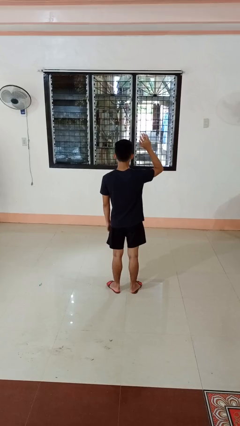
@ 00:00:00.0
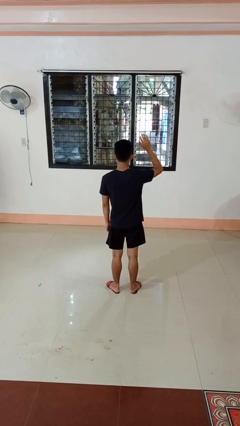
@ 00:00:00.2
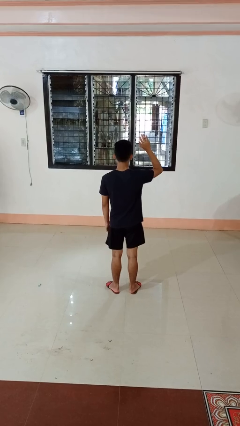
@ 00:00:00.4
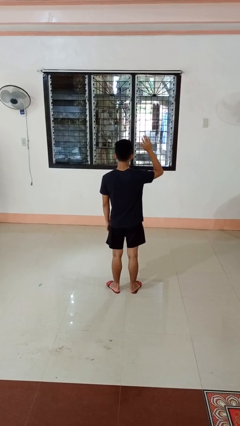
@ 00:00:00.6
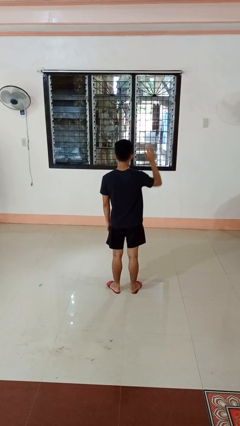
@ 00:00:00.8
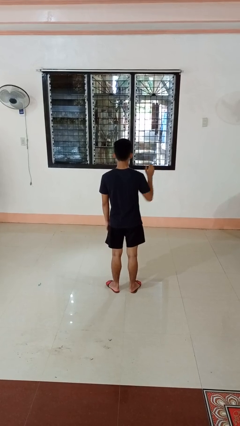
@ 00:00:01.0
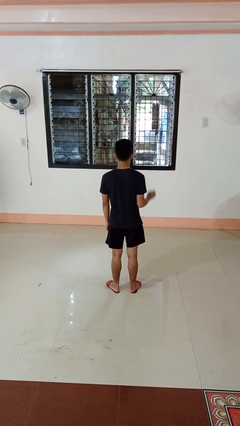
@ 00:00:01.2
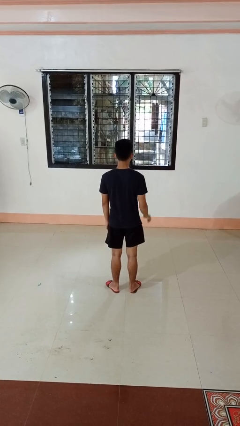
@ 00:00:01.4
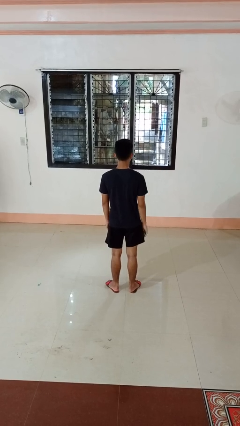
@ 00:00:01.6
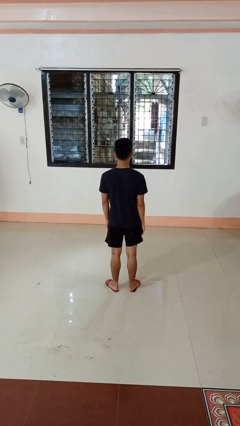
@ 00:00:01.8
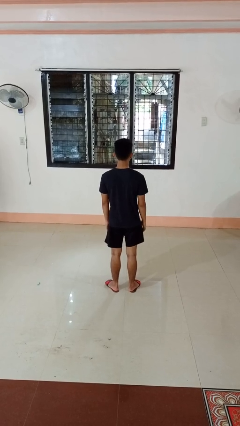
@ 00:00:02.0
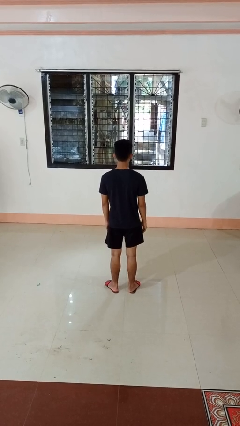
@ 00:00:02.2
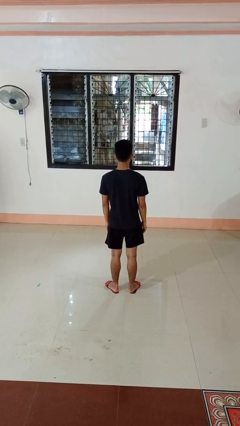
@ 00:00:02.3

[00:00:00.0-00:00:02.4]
person gestures lower hand

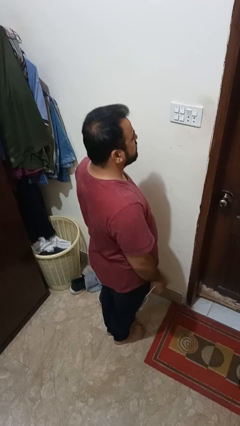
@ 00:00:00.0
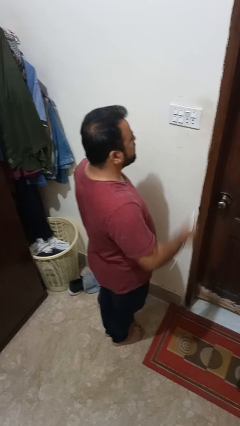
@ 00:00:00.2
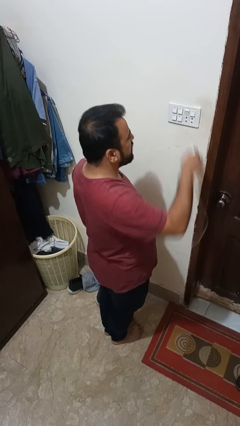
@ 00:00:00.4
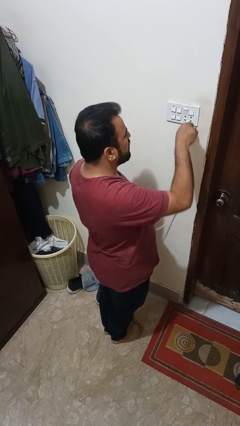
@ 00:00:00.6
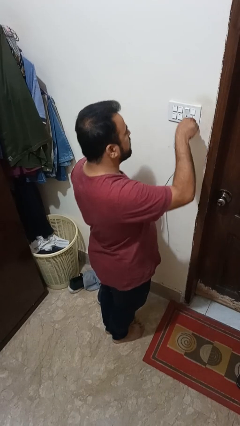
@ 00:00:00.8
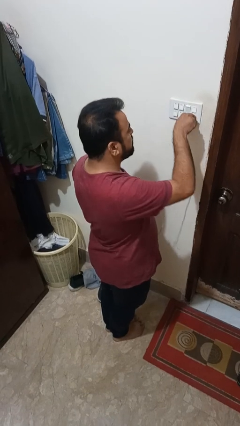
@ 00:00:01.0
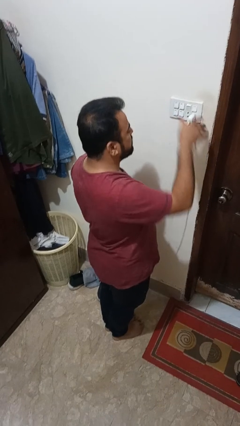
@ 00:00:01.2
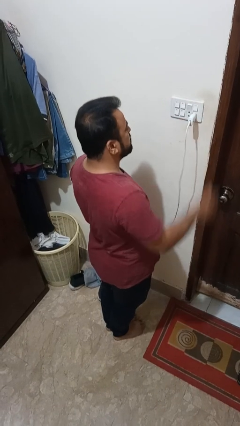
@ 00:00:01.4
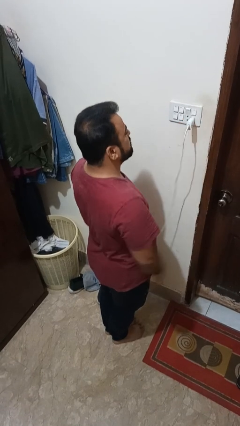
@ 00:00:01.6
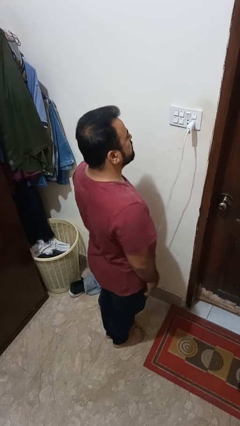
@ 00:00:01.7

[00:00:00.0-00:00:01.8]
person plugs into electrical socket

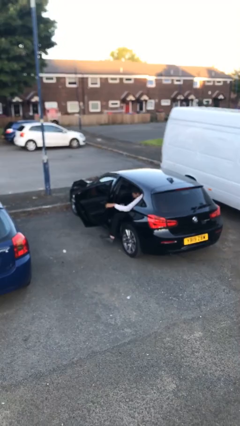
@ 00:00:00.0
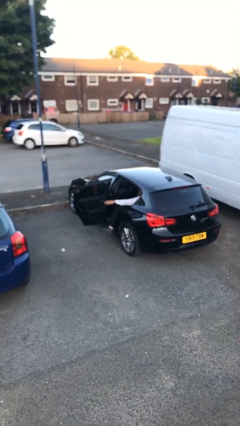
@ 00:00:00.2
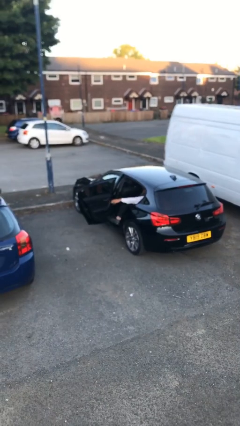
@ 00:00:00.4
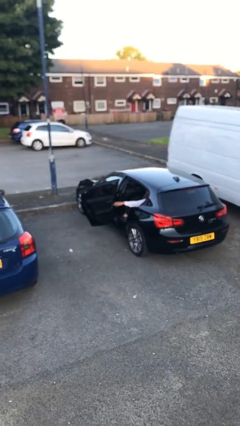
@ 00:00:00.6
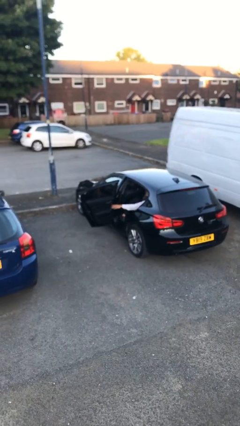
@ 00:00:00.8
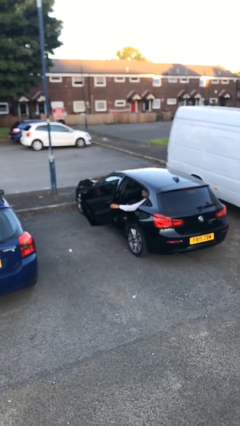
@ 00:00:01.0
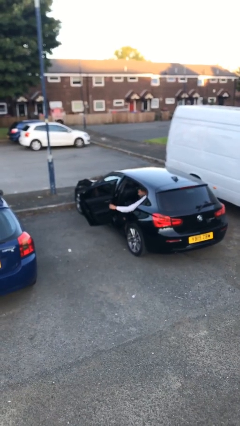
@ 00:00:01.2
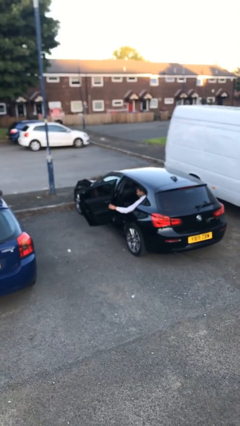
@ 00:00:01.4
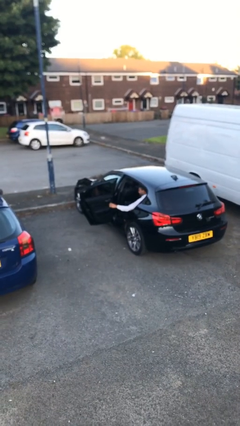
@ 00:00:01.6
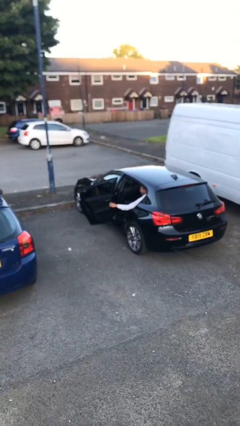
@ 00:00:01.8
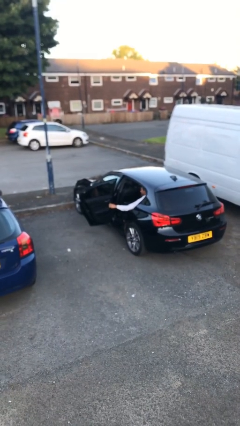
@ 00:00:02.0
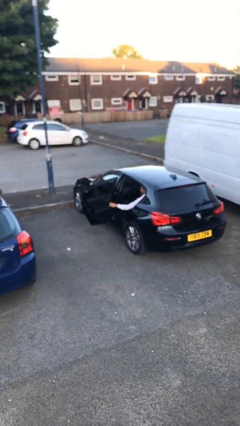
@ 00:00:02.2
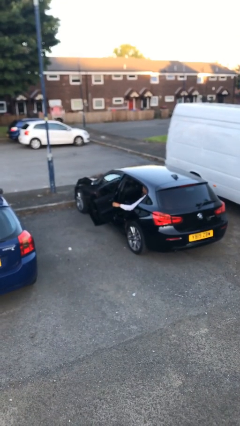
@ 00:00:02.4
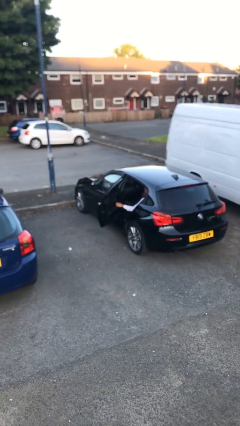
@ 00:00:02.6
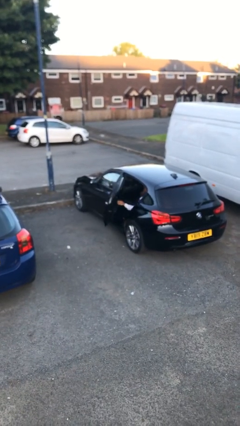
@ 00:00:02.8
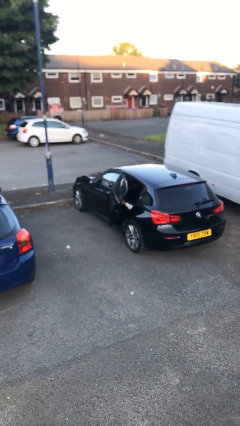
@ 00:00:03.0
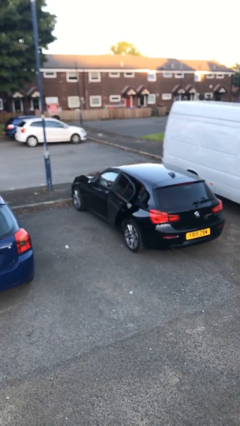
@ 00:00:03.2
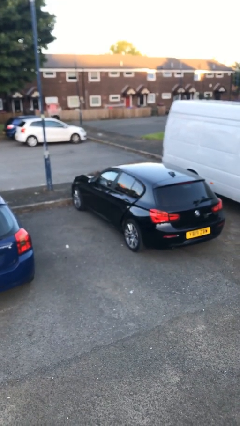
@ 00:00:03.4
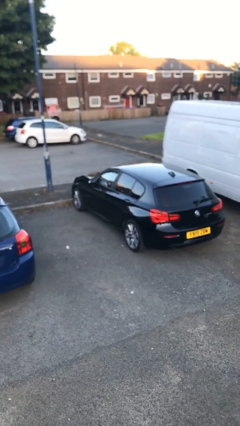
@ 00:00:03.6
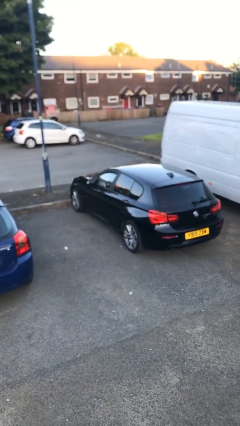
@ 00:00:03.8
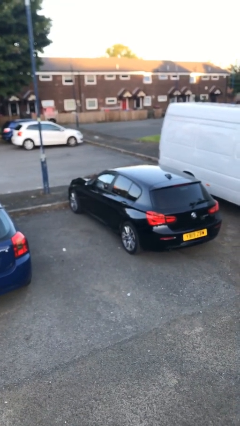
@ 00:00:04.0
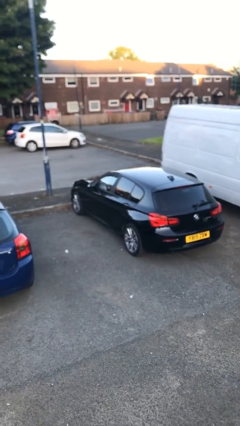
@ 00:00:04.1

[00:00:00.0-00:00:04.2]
person closes car door

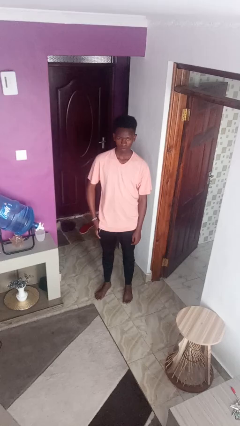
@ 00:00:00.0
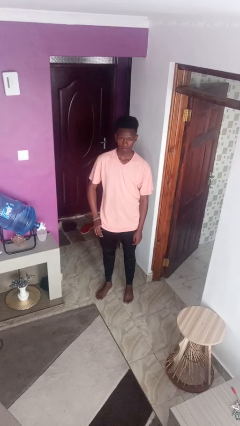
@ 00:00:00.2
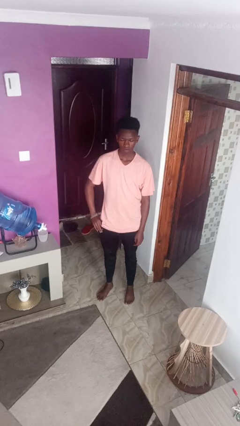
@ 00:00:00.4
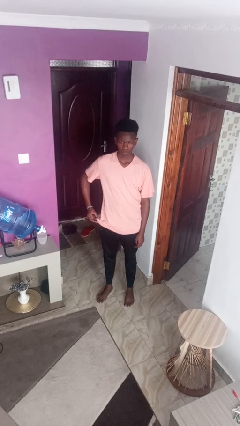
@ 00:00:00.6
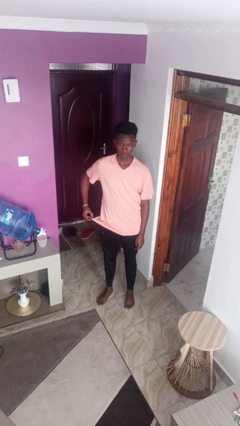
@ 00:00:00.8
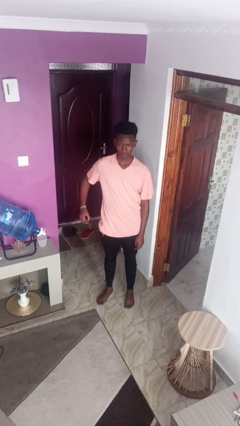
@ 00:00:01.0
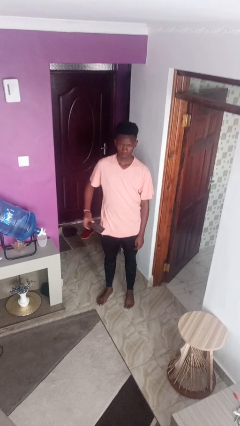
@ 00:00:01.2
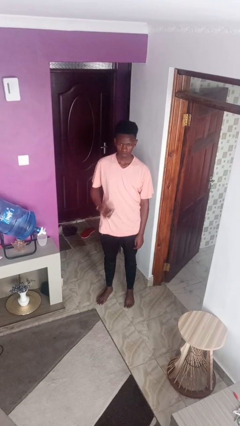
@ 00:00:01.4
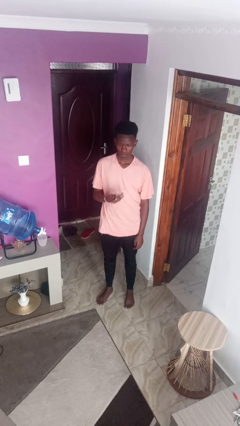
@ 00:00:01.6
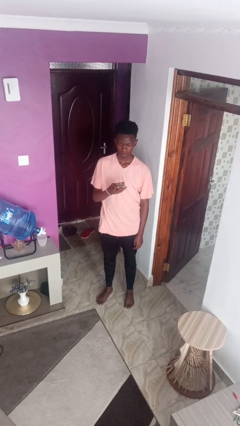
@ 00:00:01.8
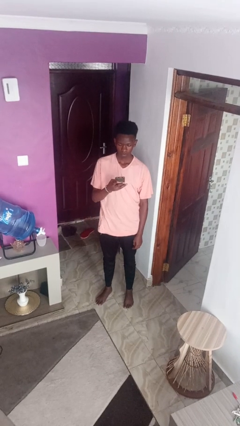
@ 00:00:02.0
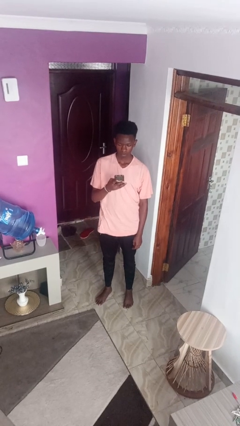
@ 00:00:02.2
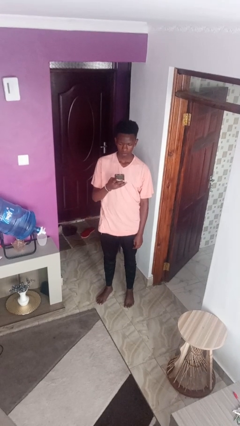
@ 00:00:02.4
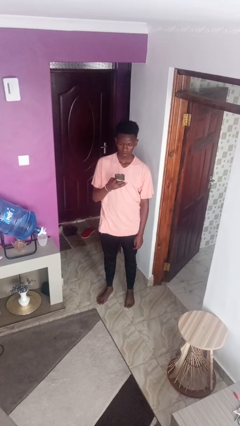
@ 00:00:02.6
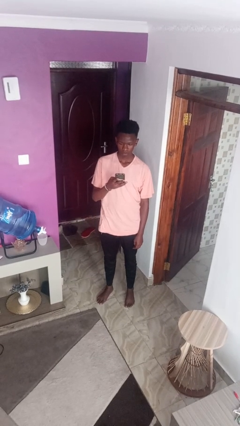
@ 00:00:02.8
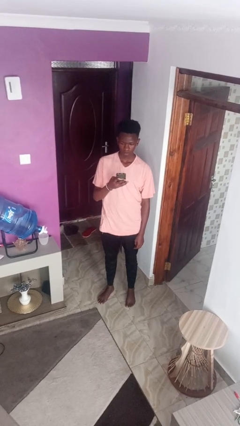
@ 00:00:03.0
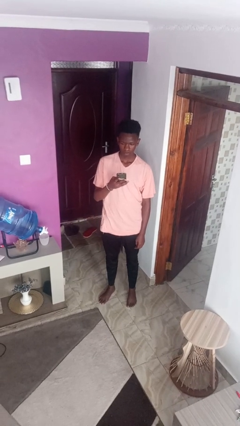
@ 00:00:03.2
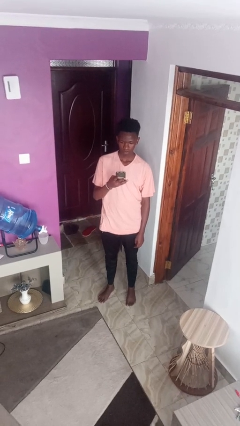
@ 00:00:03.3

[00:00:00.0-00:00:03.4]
person takes phone from pocket

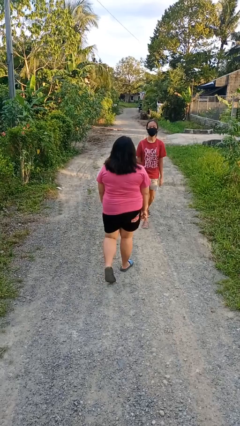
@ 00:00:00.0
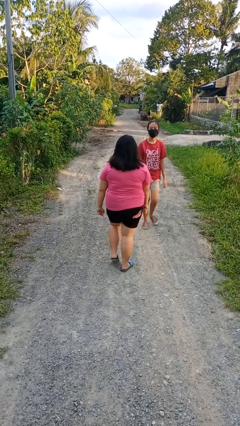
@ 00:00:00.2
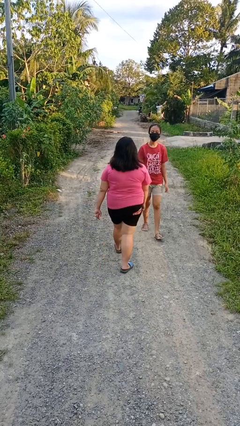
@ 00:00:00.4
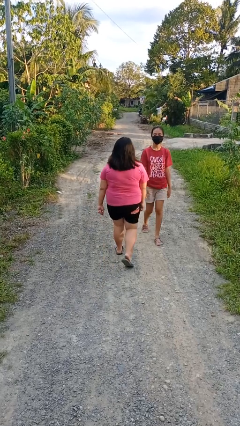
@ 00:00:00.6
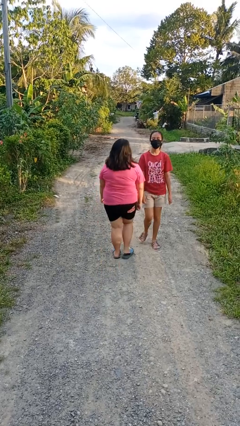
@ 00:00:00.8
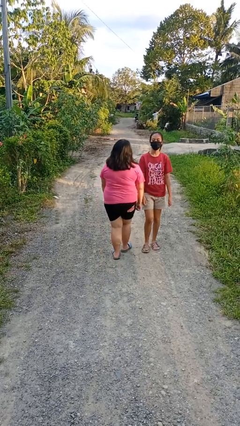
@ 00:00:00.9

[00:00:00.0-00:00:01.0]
person bumps into person

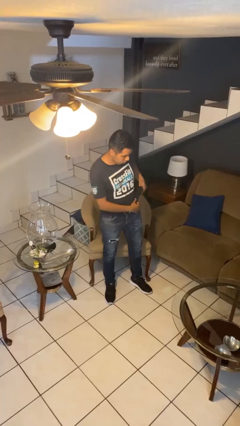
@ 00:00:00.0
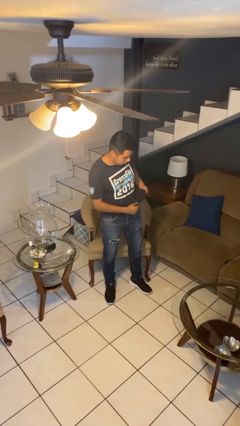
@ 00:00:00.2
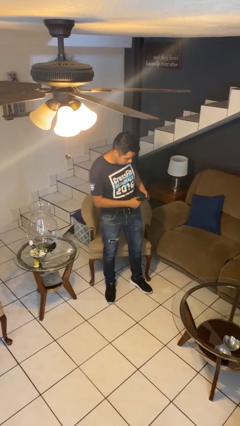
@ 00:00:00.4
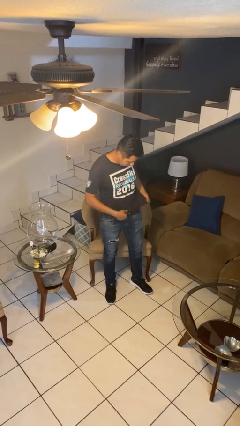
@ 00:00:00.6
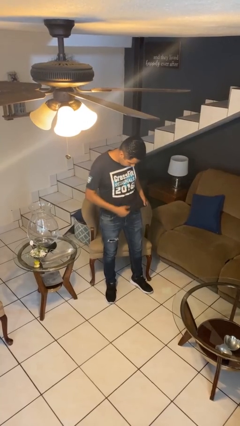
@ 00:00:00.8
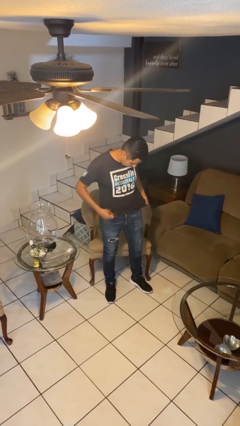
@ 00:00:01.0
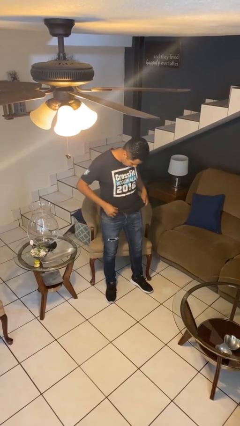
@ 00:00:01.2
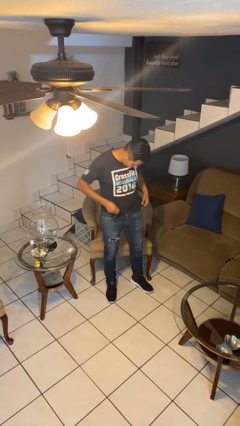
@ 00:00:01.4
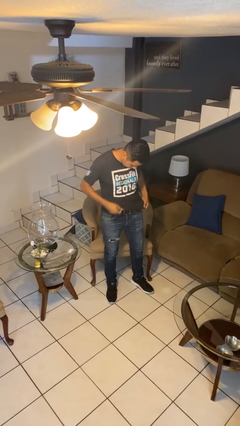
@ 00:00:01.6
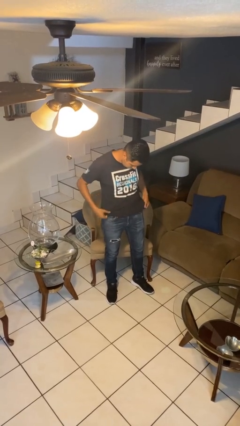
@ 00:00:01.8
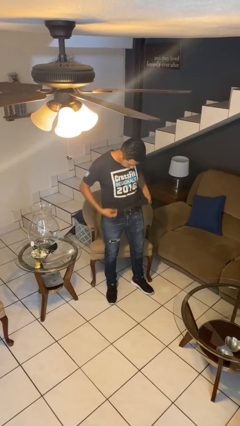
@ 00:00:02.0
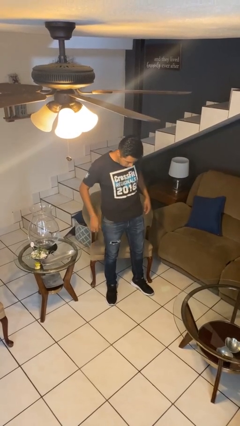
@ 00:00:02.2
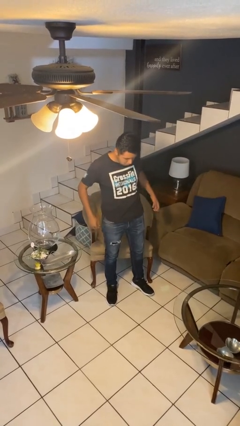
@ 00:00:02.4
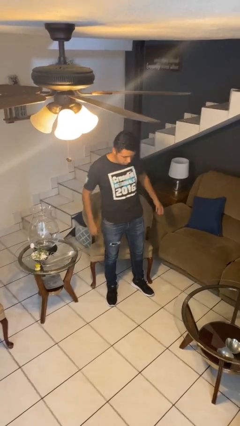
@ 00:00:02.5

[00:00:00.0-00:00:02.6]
person untucks shirt

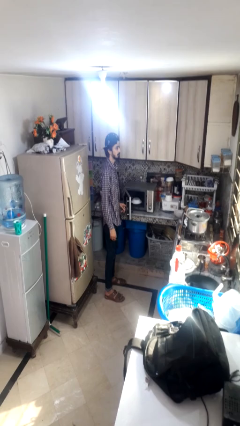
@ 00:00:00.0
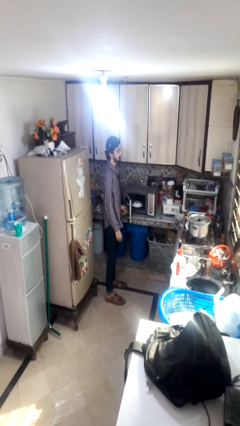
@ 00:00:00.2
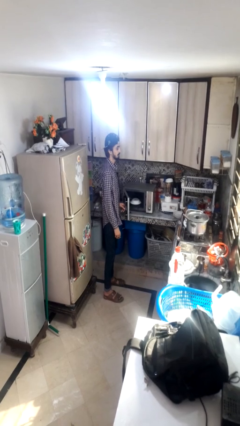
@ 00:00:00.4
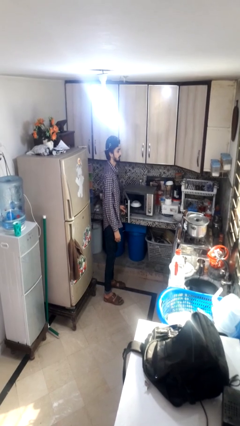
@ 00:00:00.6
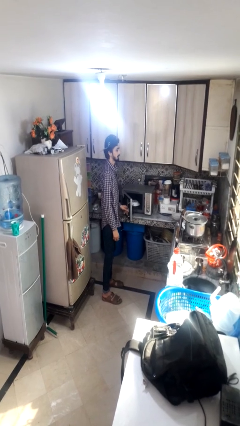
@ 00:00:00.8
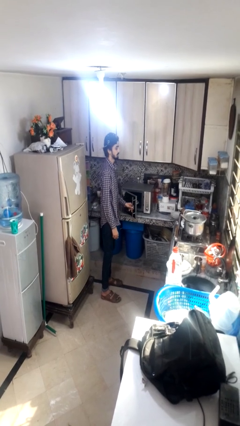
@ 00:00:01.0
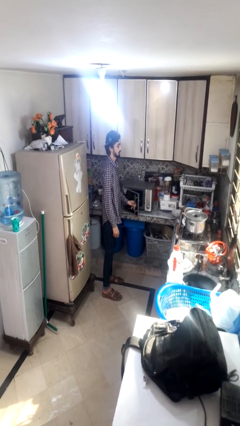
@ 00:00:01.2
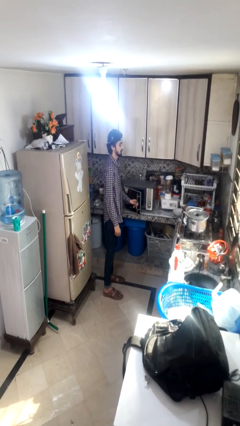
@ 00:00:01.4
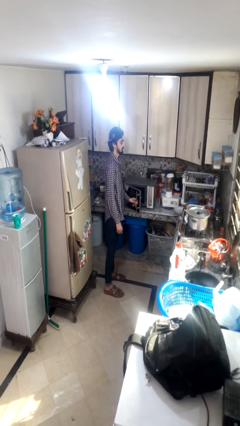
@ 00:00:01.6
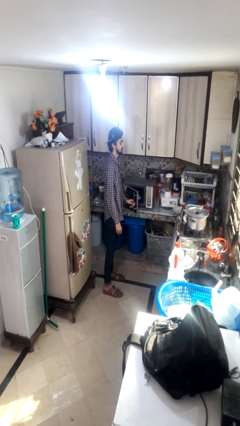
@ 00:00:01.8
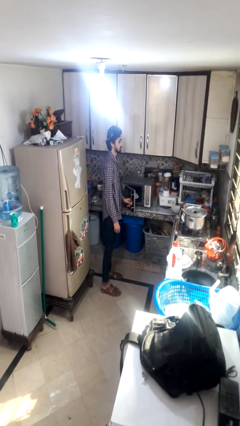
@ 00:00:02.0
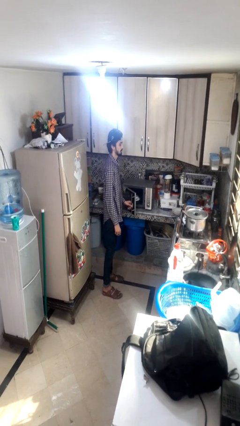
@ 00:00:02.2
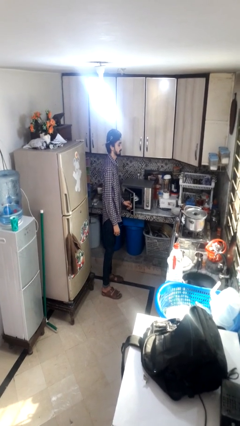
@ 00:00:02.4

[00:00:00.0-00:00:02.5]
person puts object into microwave
